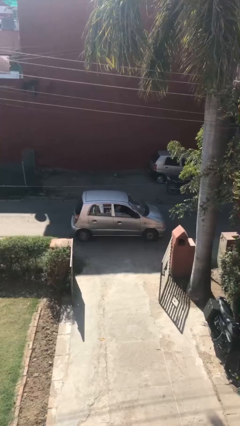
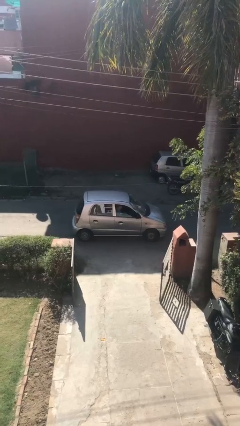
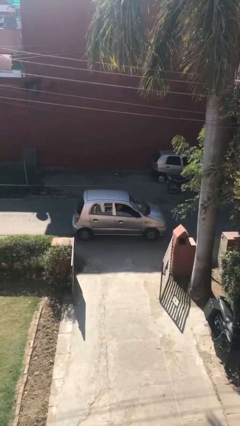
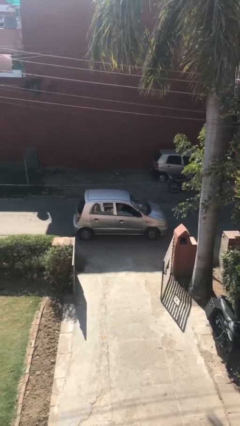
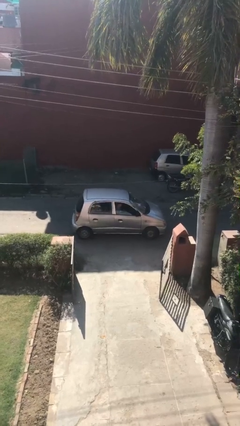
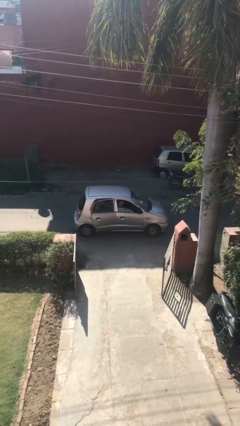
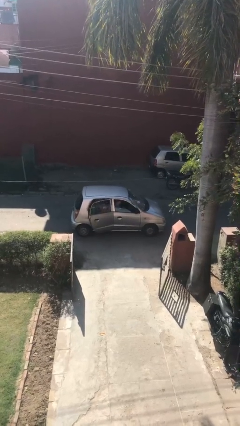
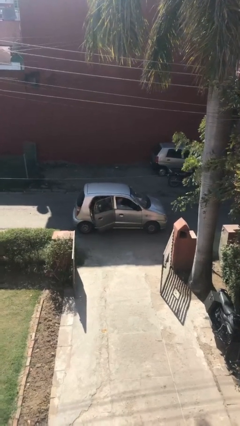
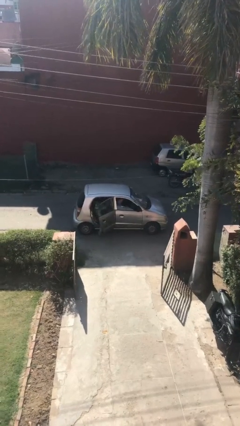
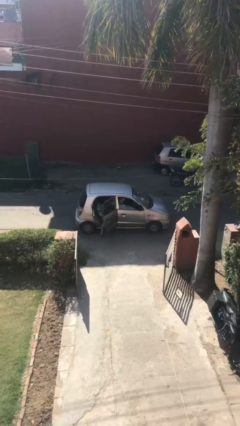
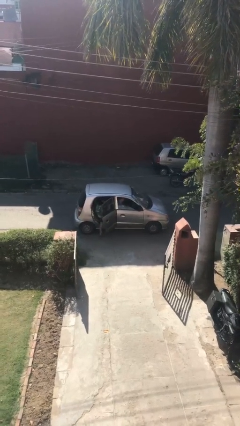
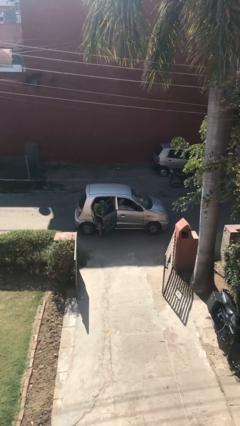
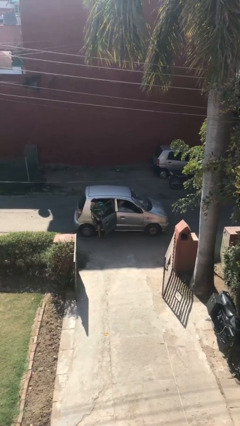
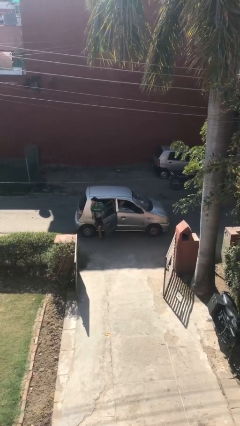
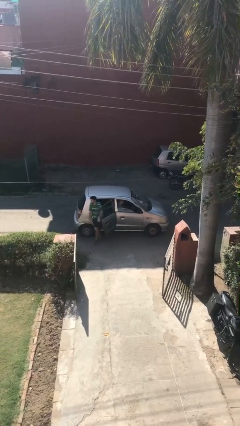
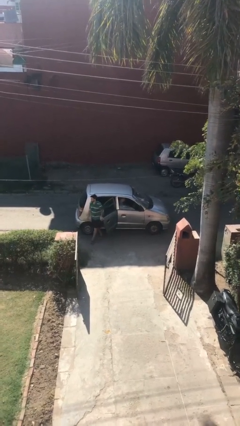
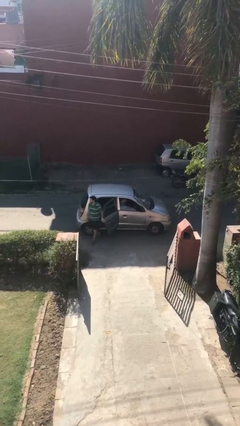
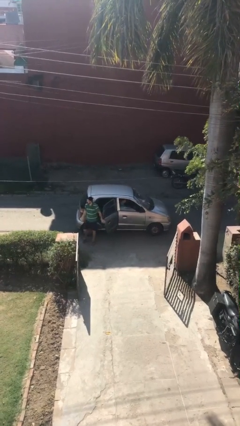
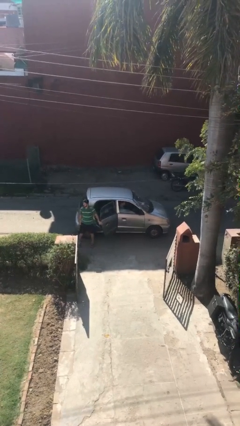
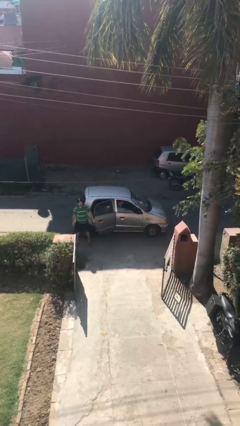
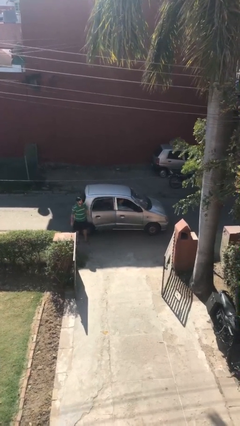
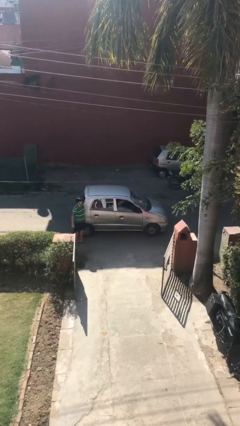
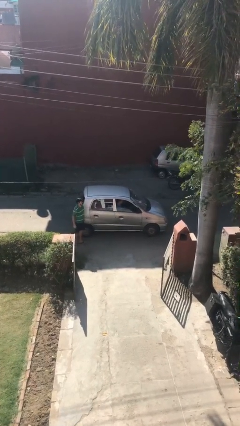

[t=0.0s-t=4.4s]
car drops off person

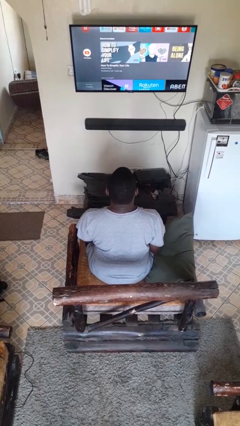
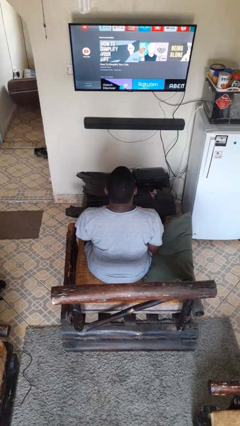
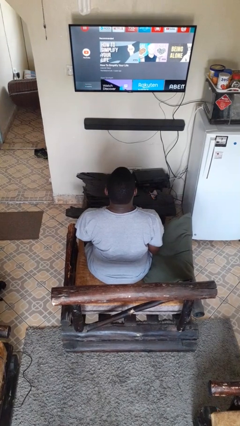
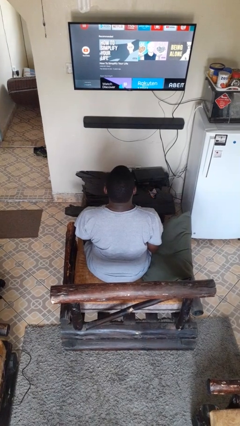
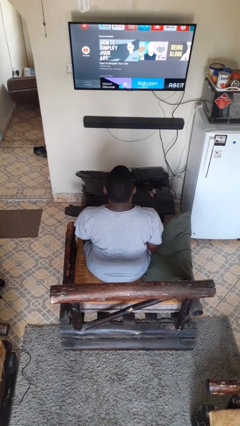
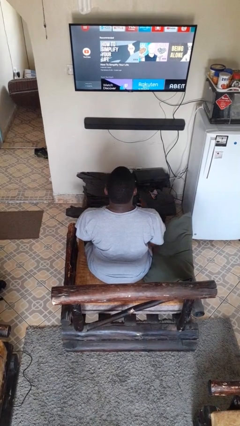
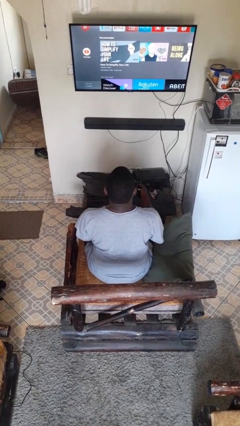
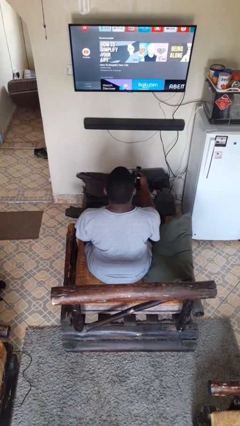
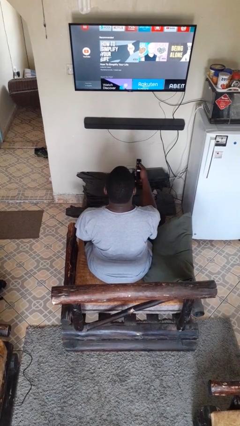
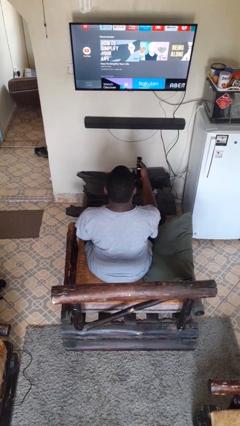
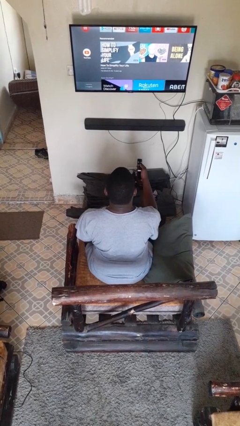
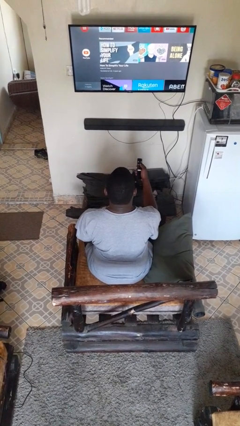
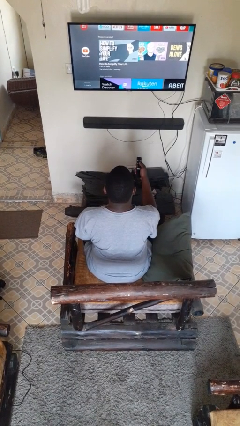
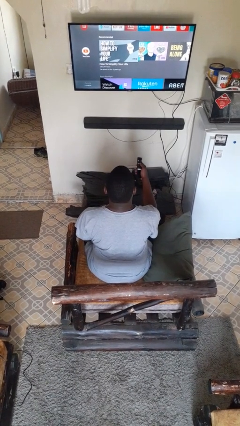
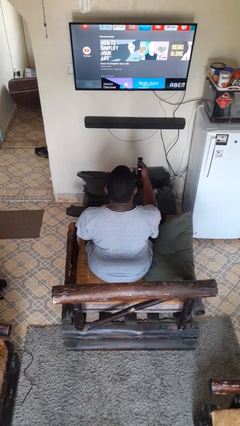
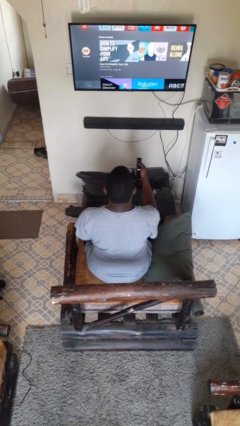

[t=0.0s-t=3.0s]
person uses television remote

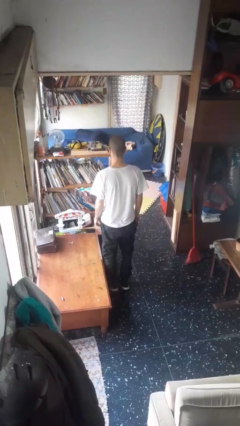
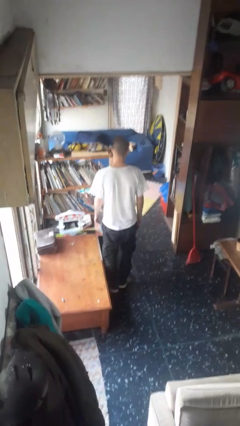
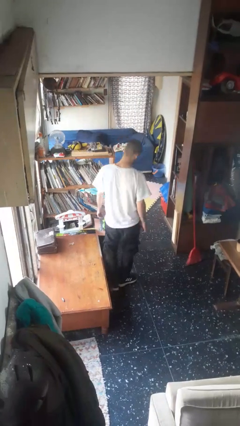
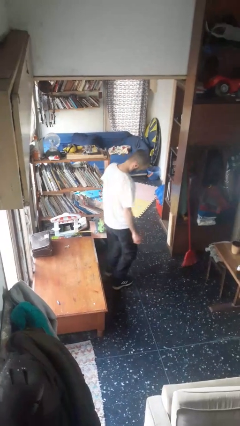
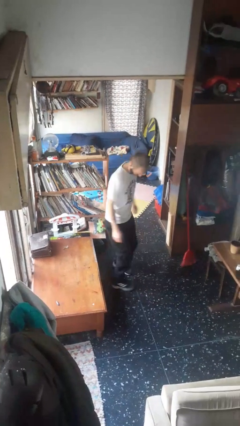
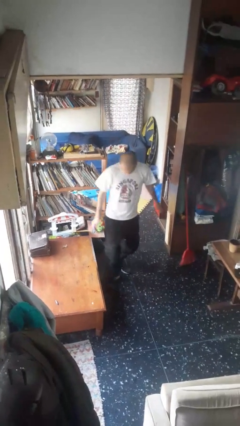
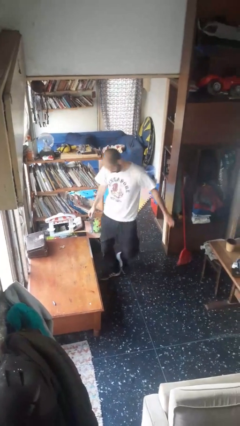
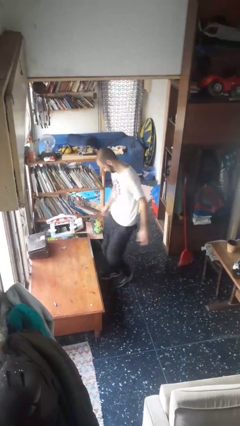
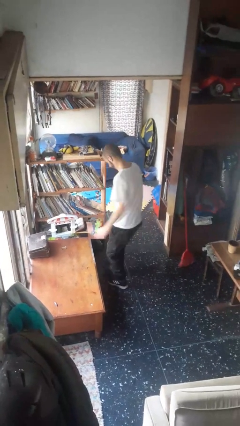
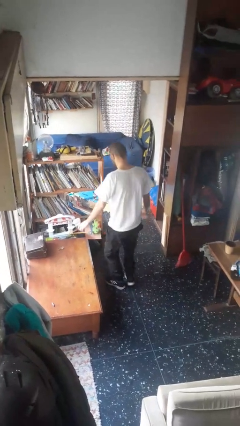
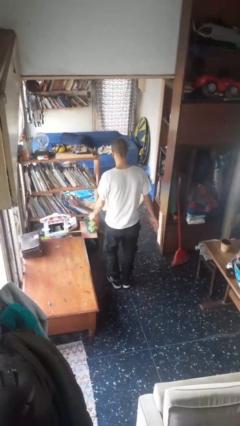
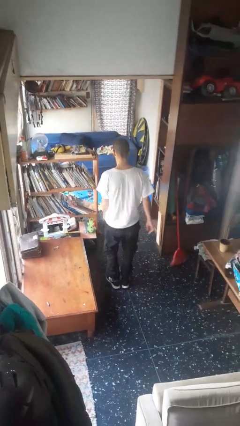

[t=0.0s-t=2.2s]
person twirls

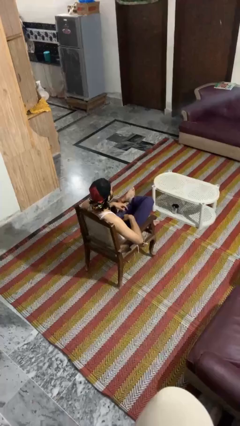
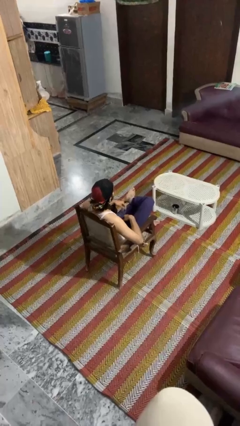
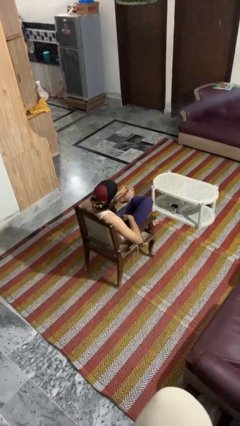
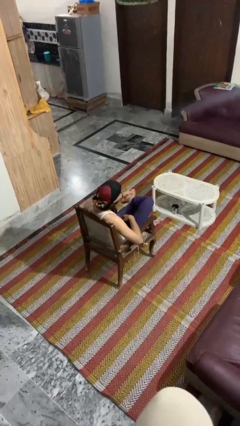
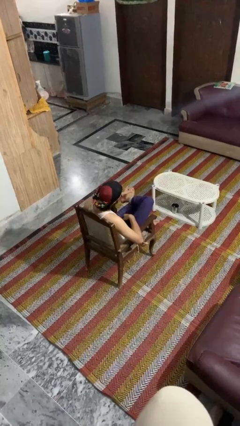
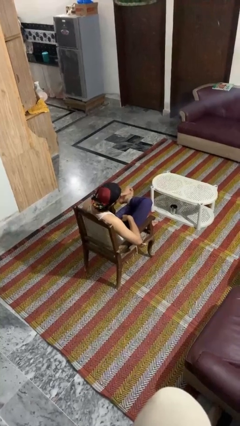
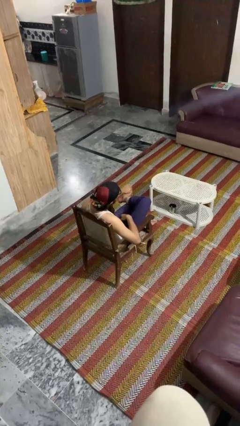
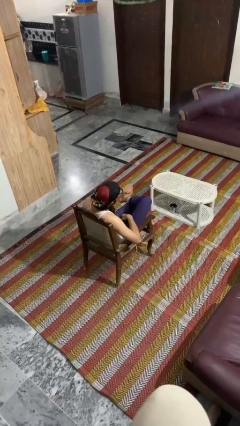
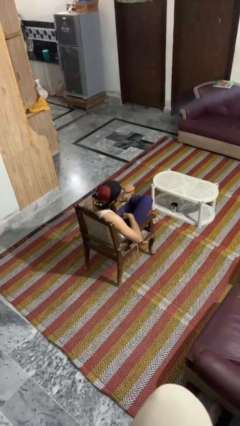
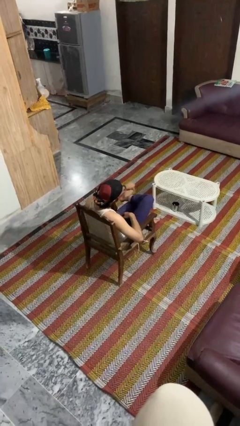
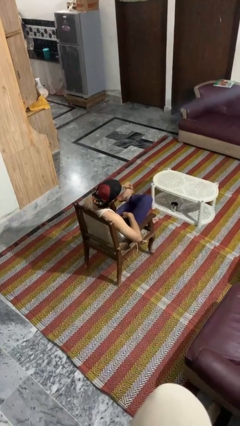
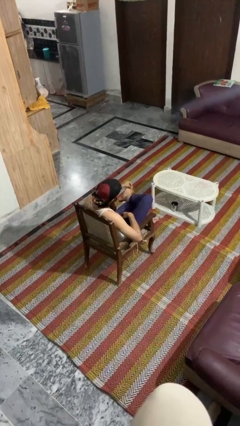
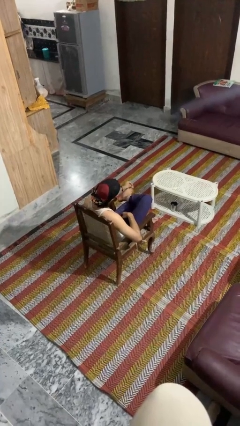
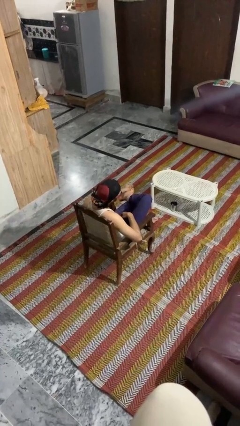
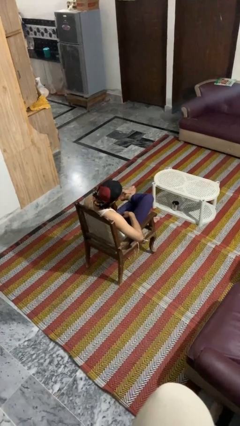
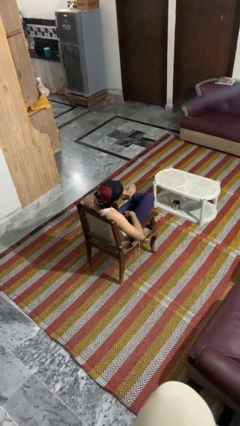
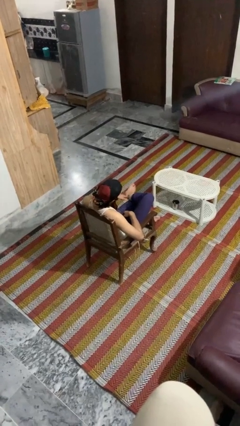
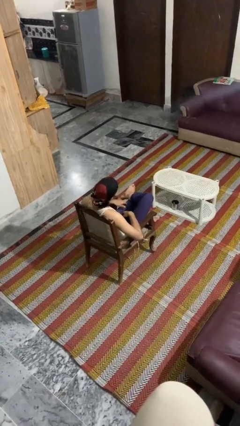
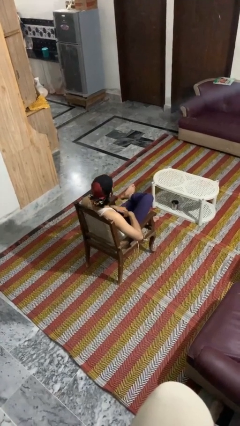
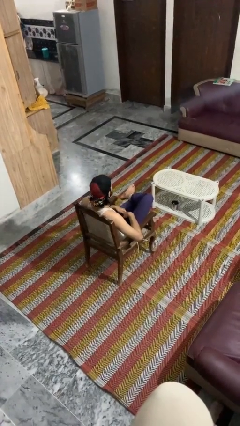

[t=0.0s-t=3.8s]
person rubs foot

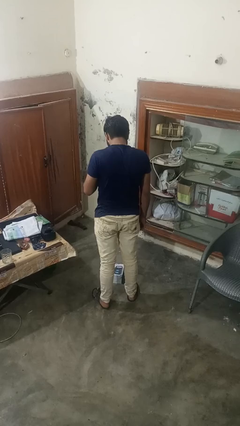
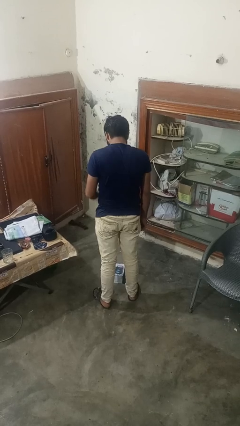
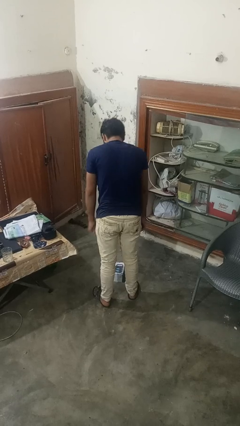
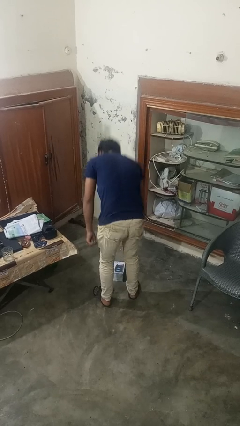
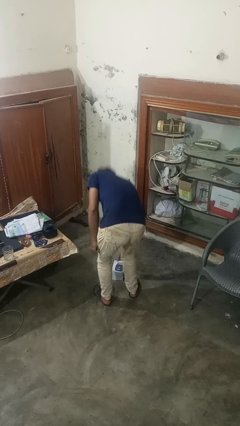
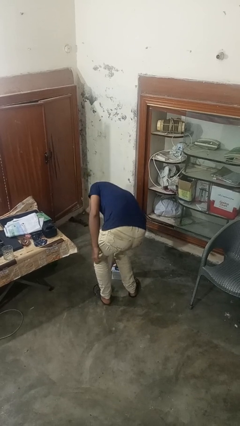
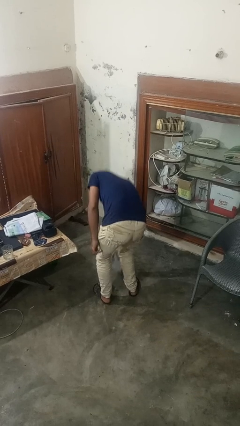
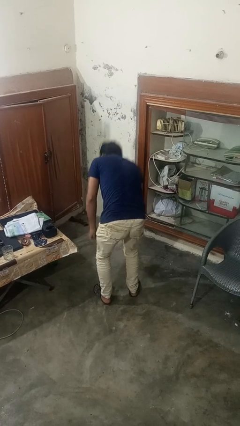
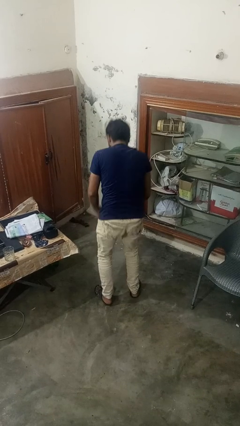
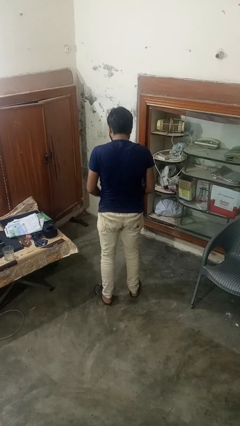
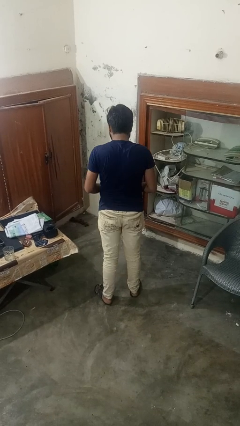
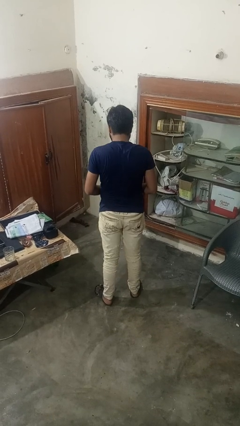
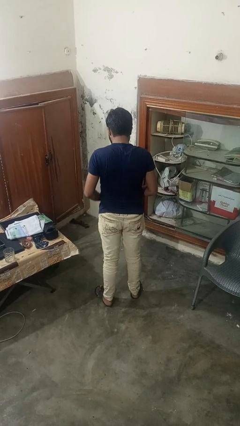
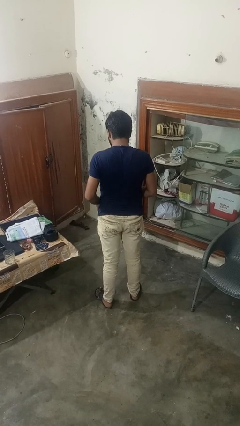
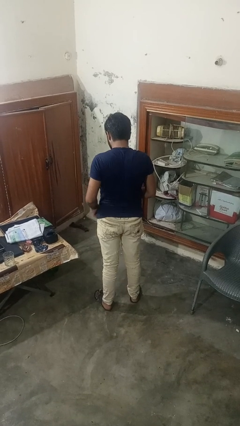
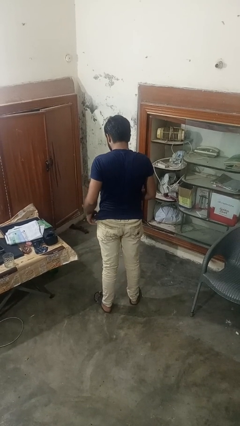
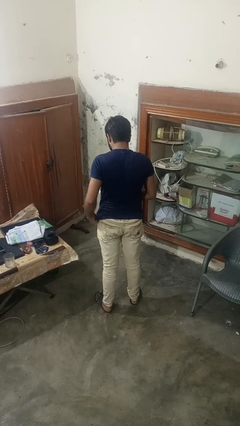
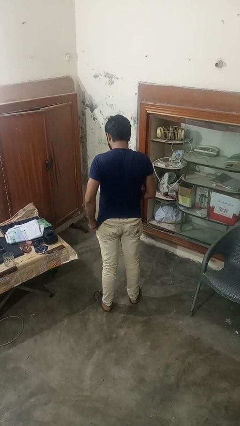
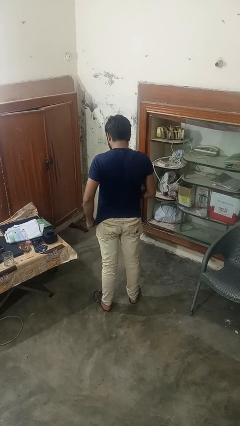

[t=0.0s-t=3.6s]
person picks up object from floor

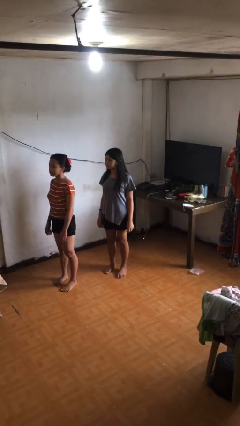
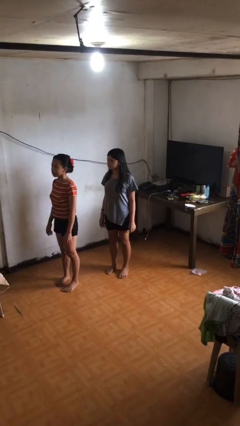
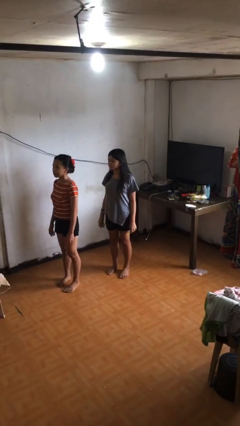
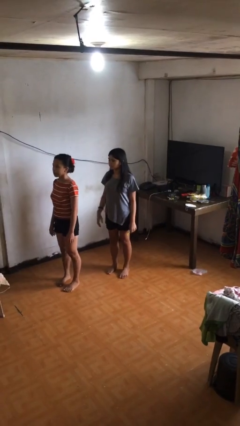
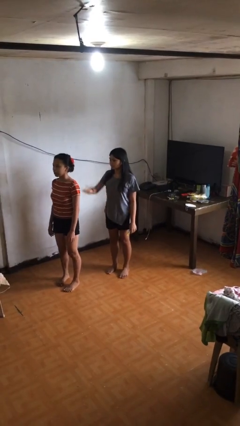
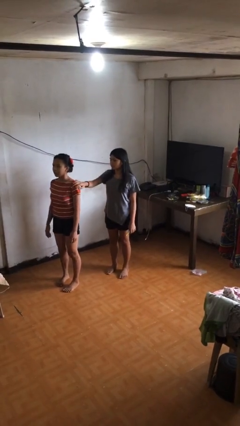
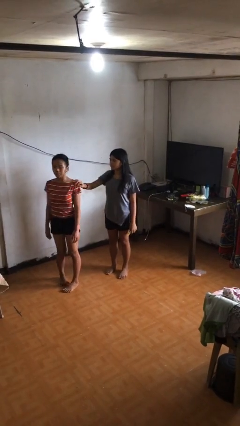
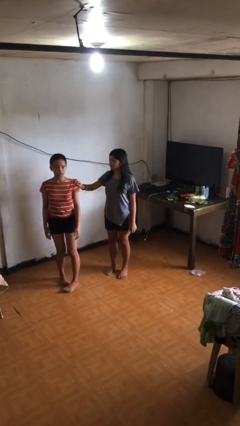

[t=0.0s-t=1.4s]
person grabs person by shoulder
